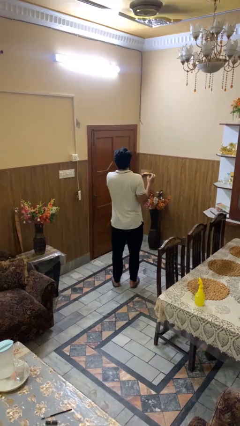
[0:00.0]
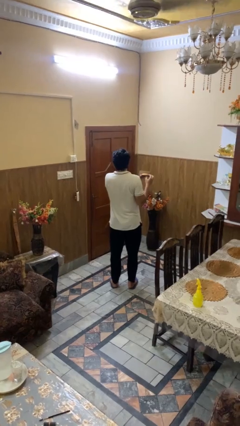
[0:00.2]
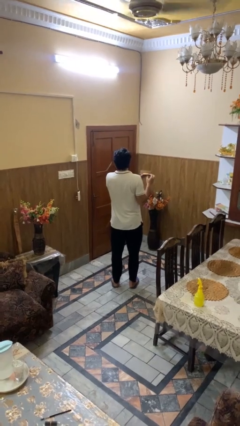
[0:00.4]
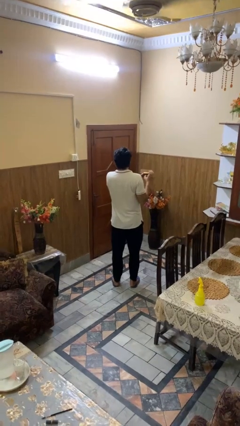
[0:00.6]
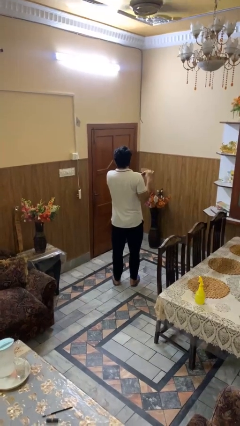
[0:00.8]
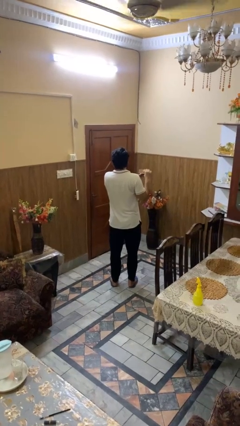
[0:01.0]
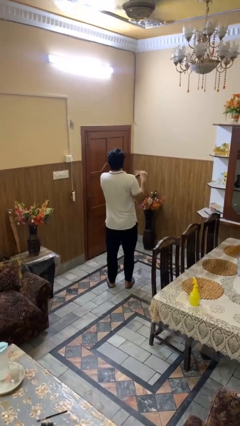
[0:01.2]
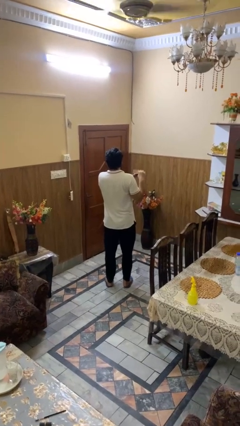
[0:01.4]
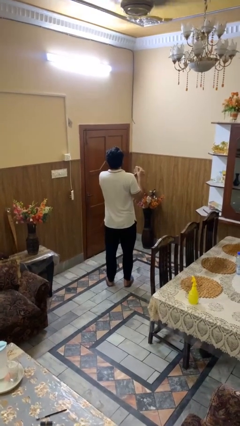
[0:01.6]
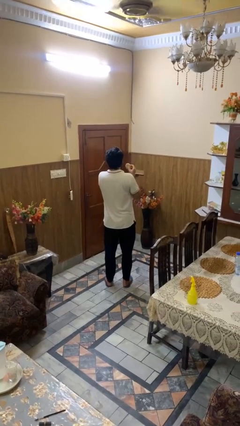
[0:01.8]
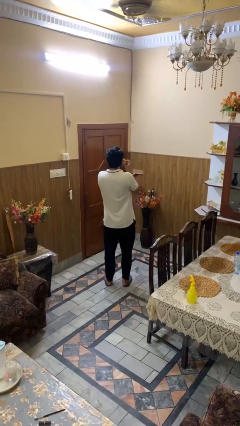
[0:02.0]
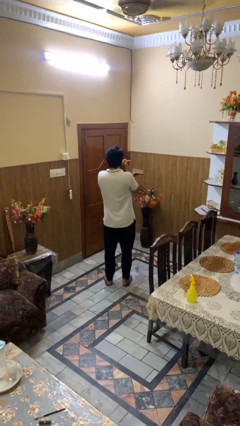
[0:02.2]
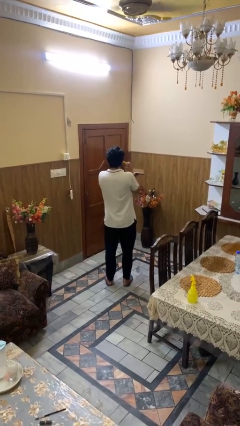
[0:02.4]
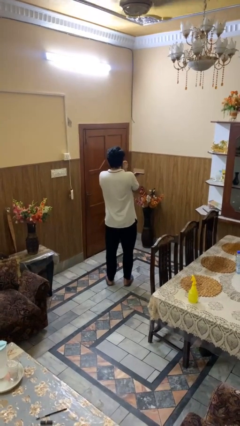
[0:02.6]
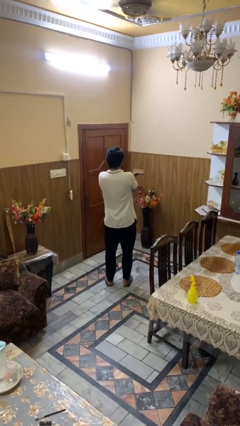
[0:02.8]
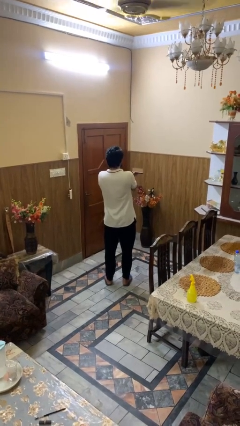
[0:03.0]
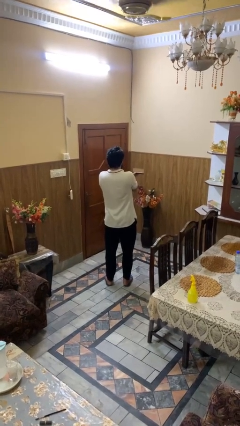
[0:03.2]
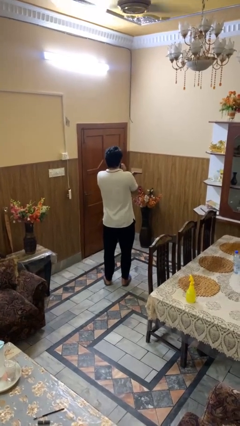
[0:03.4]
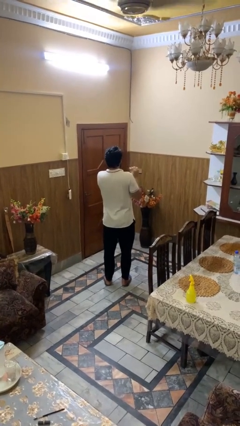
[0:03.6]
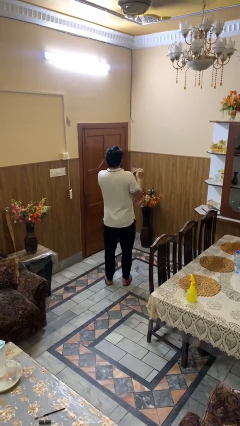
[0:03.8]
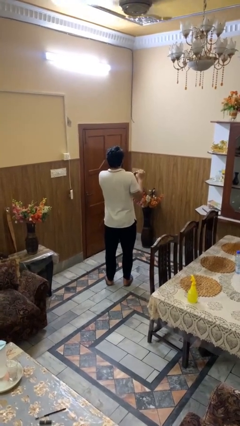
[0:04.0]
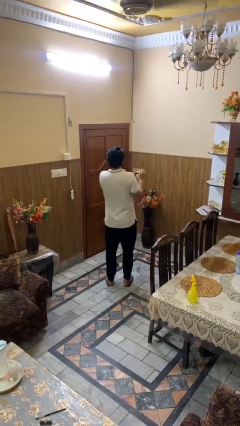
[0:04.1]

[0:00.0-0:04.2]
person applies foundation makeup

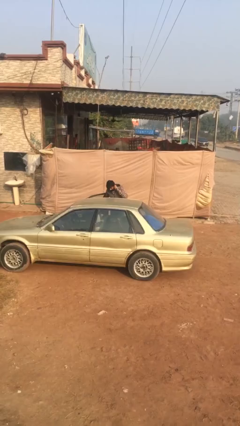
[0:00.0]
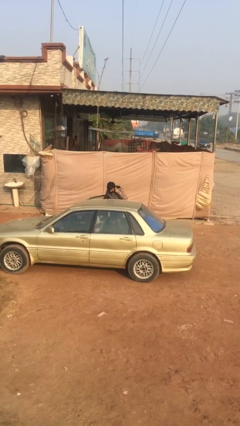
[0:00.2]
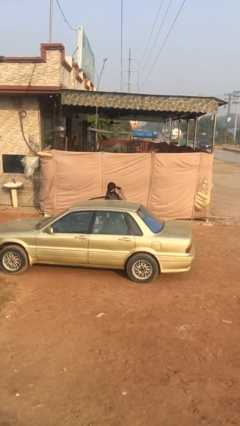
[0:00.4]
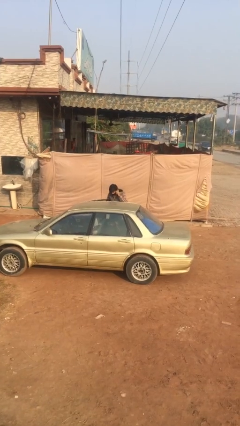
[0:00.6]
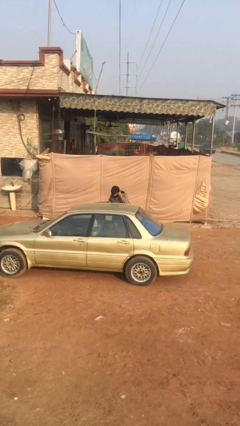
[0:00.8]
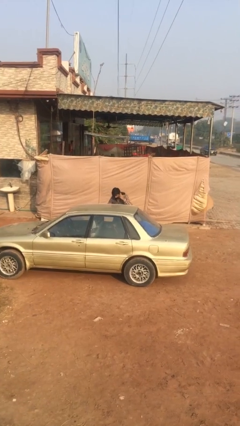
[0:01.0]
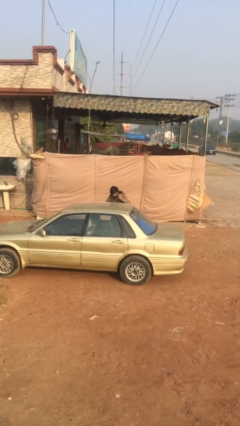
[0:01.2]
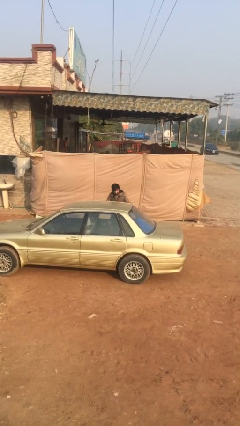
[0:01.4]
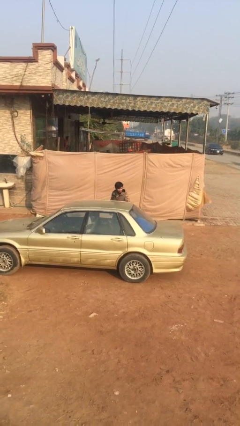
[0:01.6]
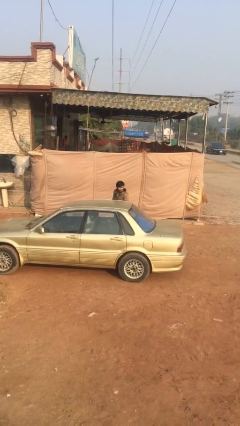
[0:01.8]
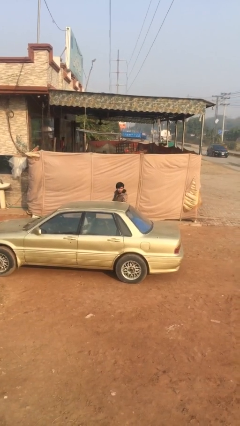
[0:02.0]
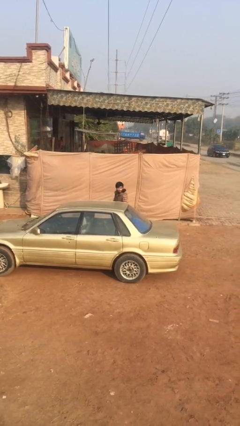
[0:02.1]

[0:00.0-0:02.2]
person closes car door

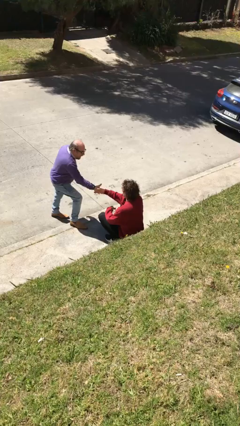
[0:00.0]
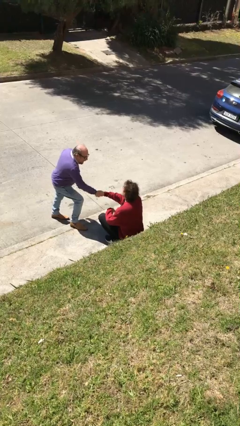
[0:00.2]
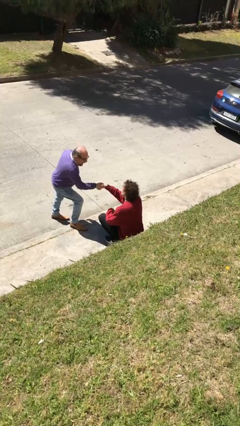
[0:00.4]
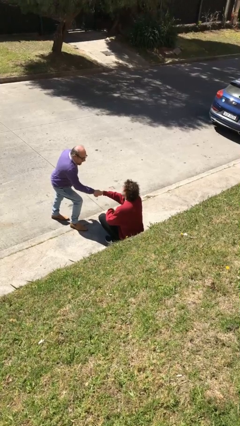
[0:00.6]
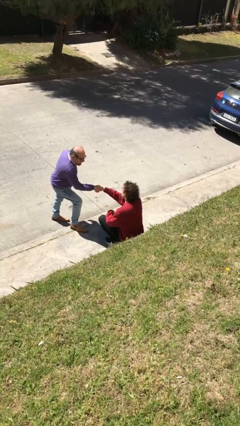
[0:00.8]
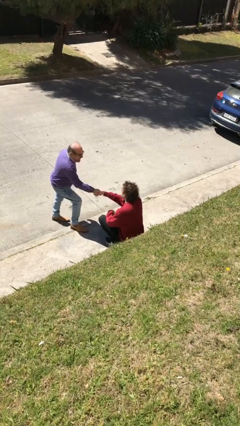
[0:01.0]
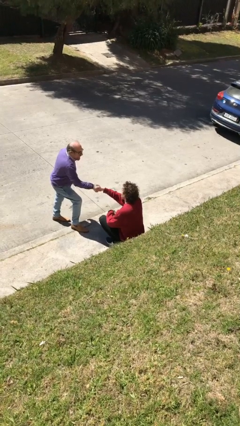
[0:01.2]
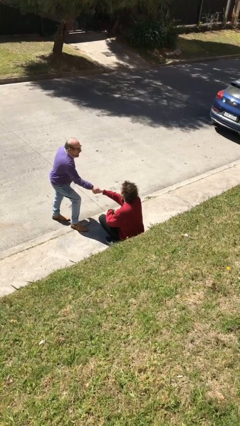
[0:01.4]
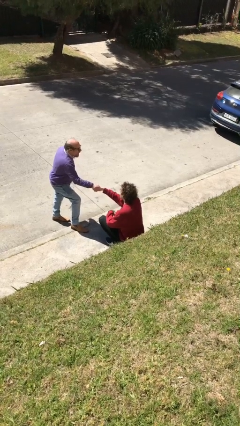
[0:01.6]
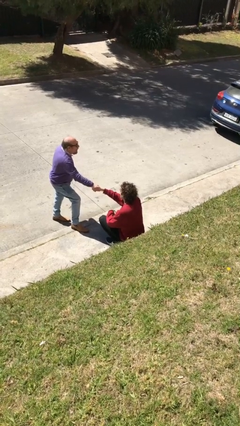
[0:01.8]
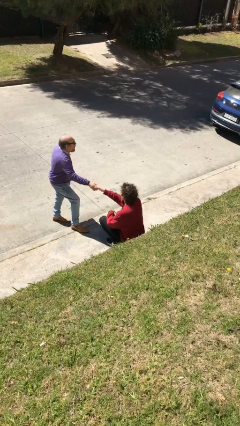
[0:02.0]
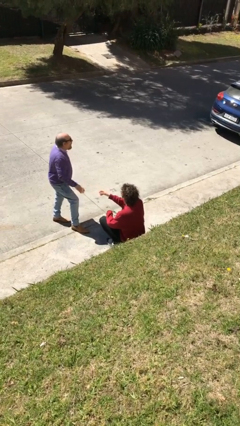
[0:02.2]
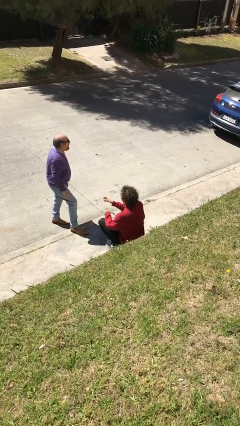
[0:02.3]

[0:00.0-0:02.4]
person shakes hand

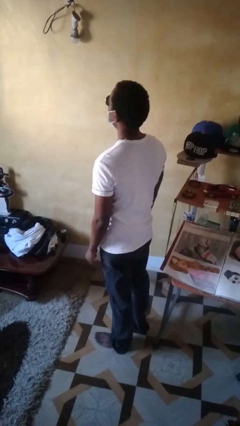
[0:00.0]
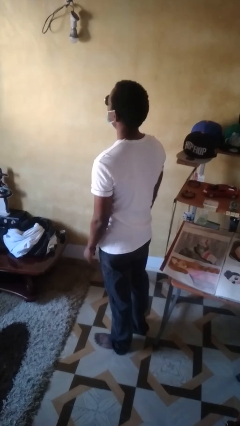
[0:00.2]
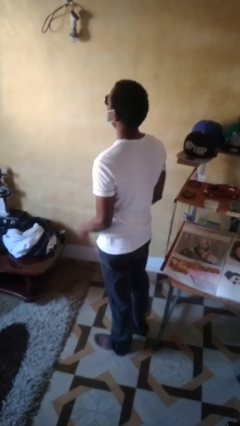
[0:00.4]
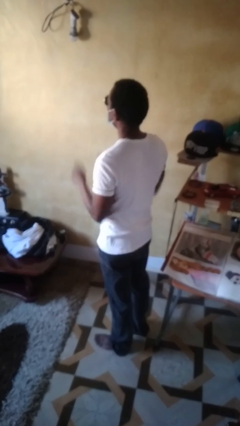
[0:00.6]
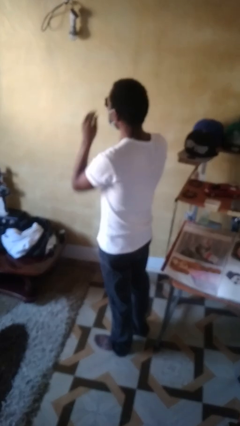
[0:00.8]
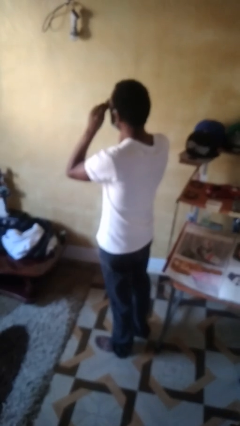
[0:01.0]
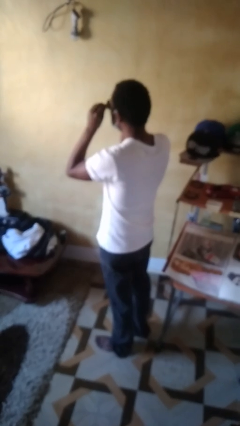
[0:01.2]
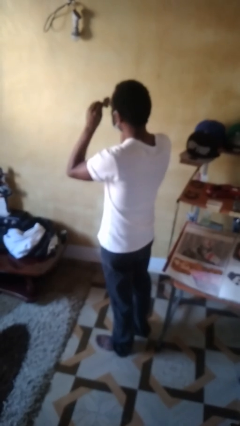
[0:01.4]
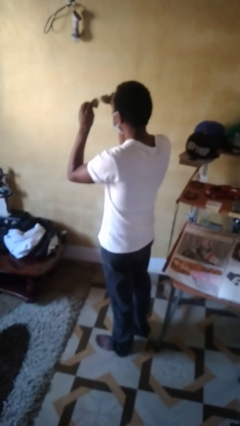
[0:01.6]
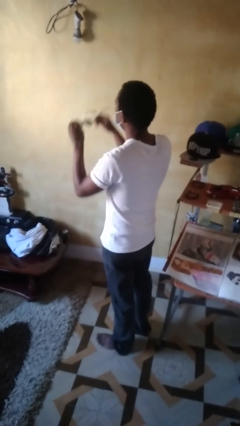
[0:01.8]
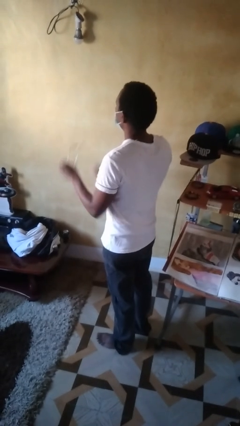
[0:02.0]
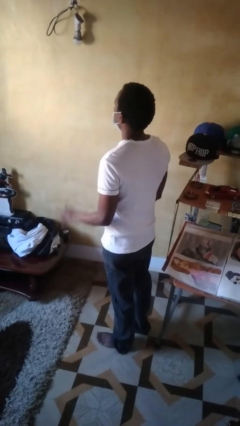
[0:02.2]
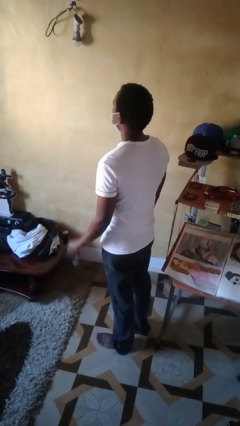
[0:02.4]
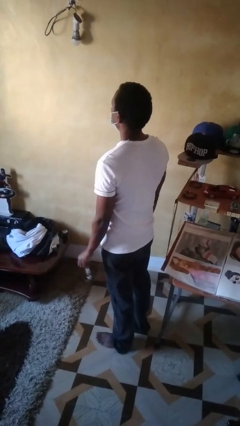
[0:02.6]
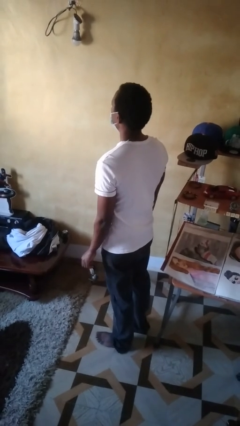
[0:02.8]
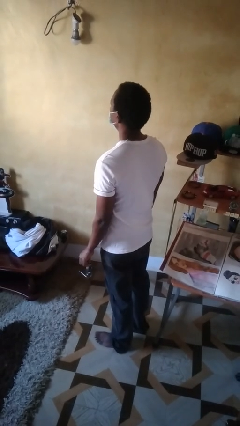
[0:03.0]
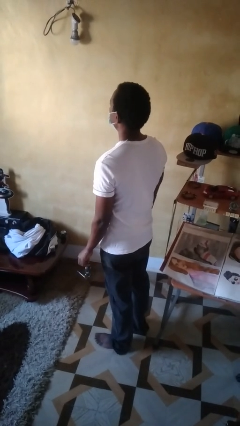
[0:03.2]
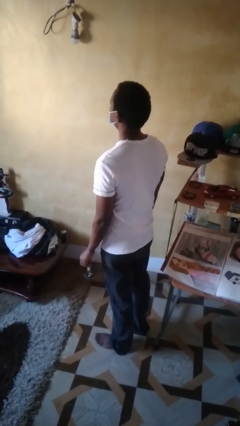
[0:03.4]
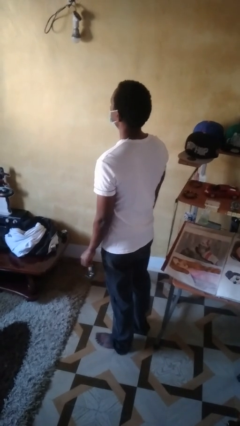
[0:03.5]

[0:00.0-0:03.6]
person takes off sunglasses

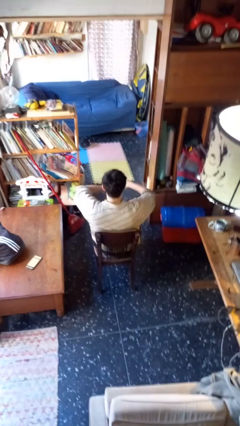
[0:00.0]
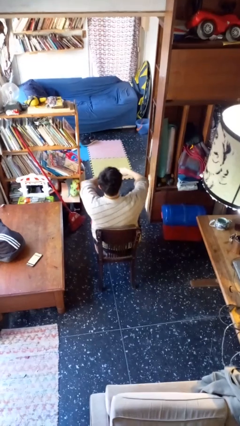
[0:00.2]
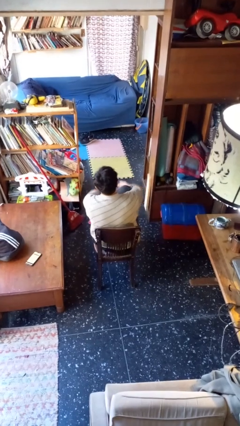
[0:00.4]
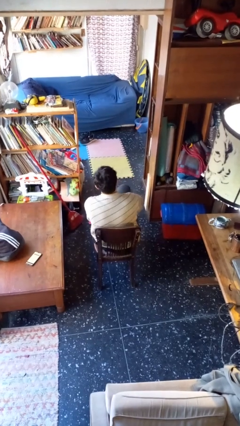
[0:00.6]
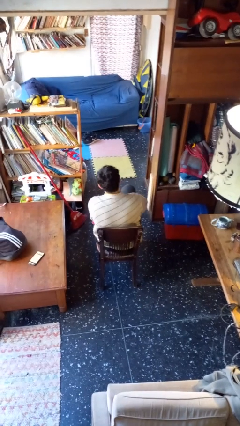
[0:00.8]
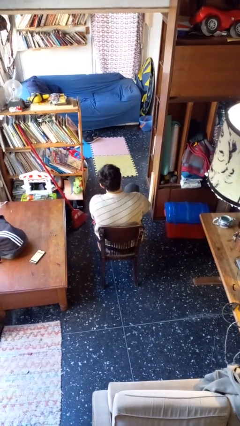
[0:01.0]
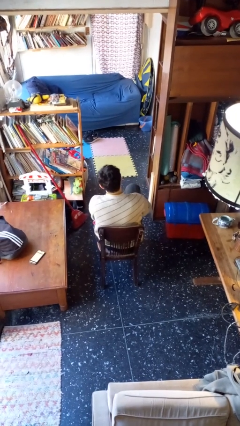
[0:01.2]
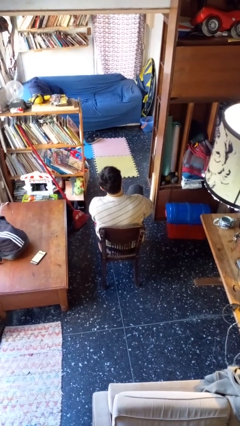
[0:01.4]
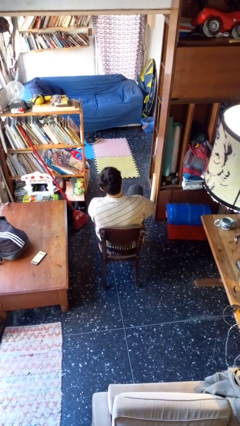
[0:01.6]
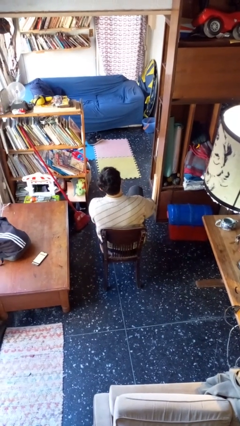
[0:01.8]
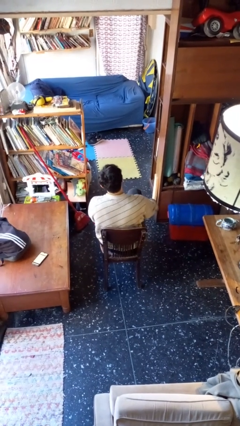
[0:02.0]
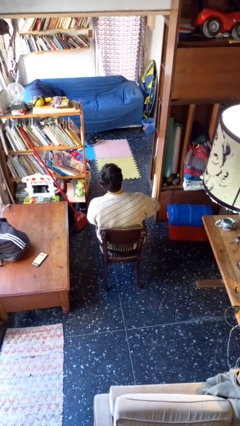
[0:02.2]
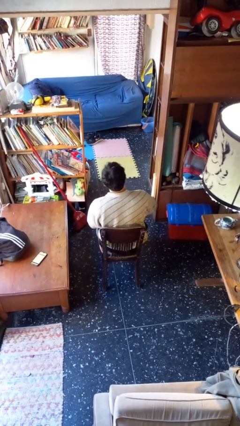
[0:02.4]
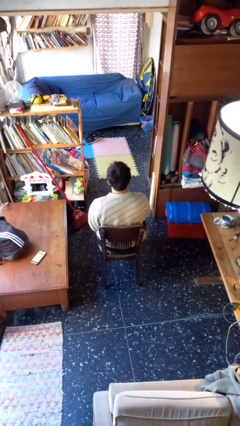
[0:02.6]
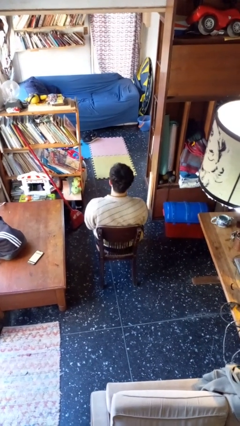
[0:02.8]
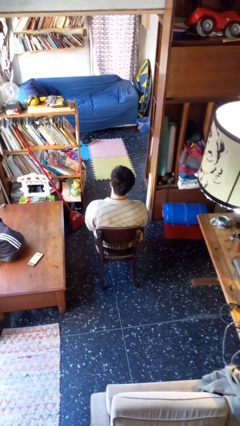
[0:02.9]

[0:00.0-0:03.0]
person puts on socks

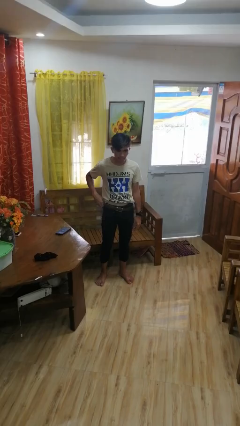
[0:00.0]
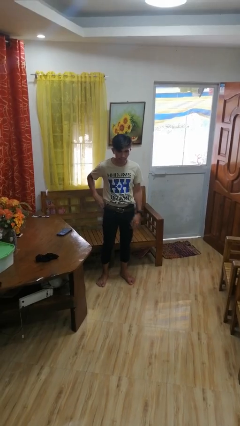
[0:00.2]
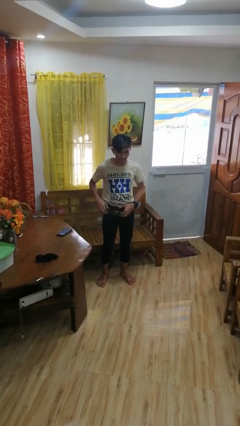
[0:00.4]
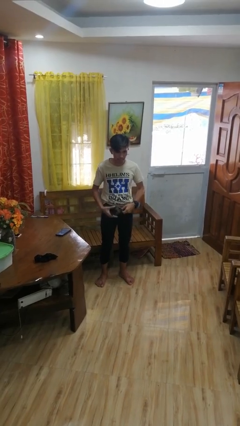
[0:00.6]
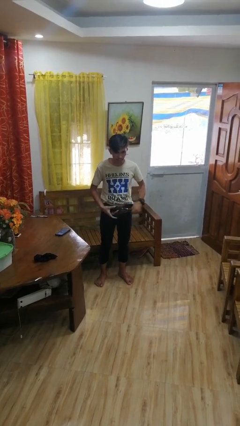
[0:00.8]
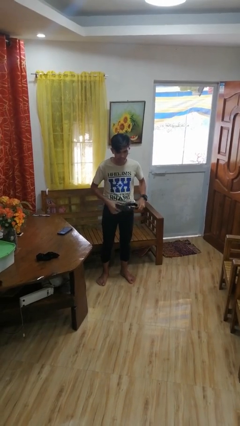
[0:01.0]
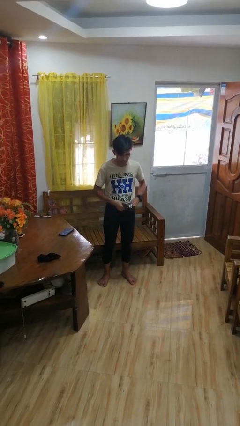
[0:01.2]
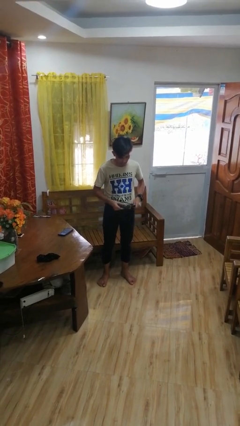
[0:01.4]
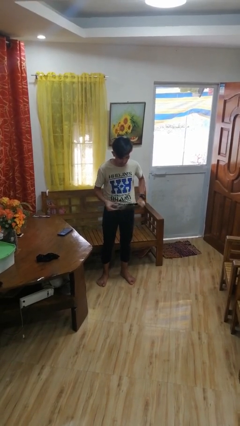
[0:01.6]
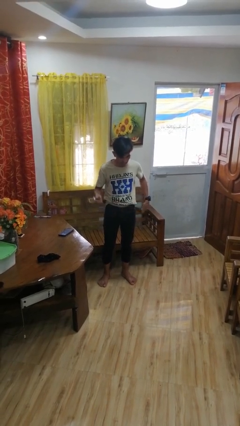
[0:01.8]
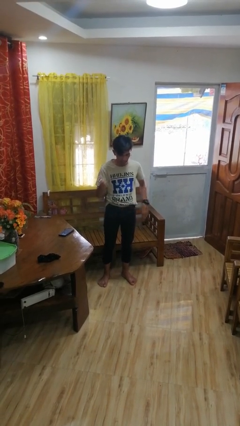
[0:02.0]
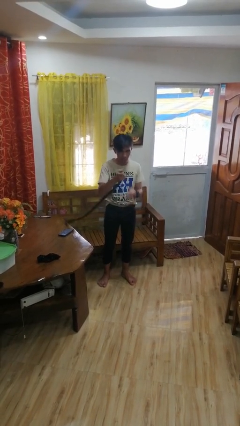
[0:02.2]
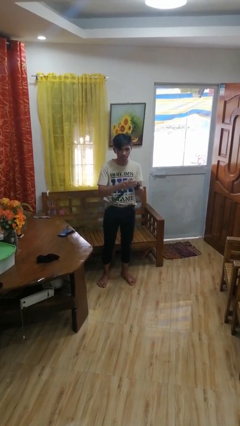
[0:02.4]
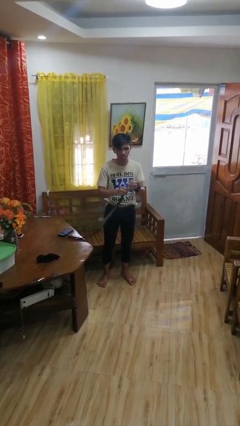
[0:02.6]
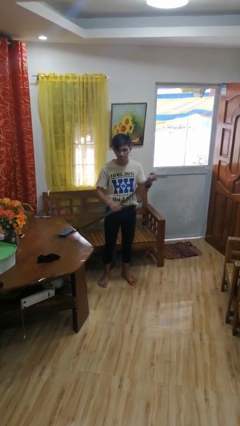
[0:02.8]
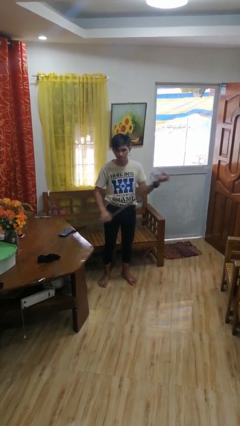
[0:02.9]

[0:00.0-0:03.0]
person takes off belt
